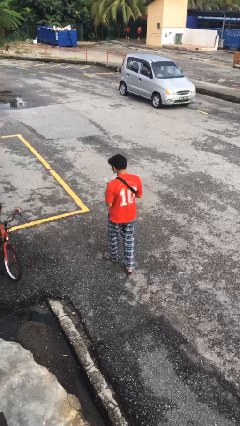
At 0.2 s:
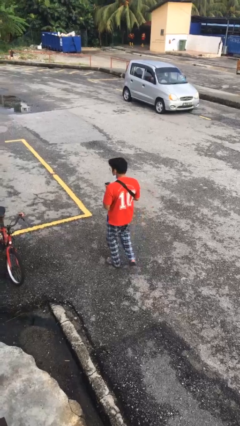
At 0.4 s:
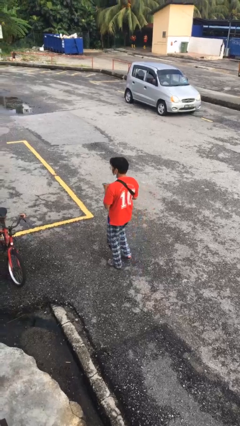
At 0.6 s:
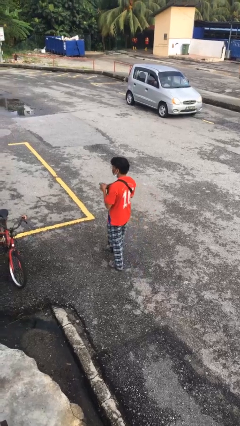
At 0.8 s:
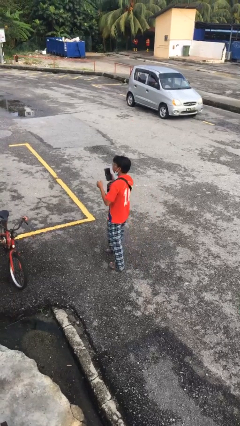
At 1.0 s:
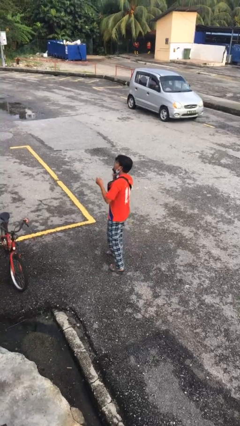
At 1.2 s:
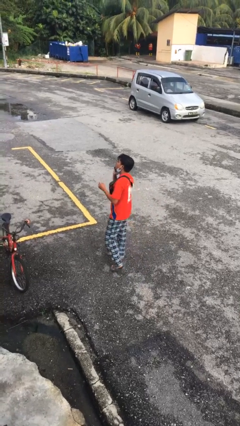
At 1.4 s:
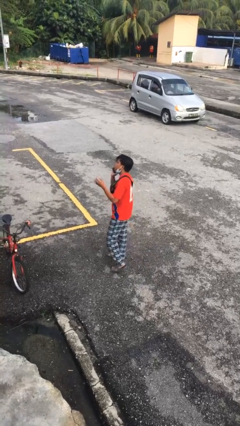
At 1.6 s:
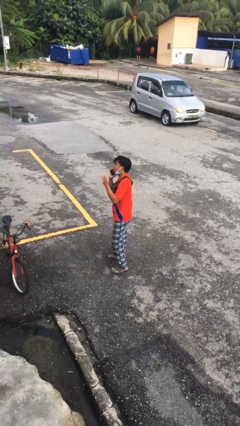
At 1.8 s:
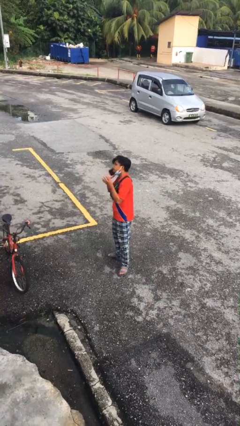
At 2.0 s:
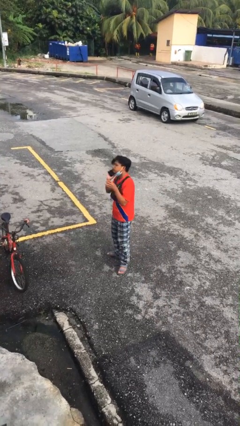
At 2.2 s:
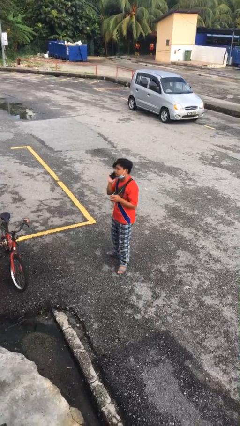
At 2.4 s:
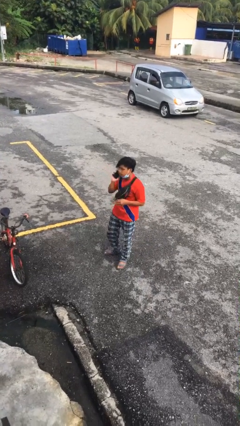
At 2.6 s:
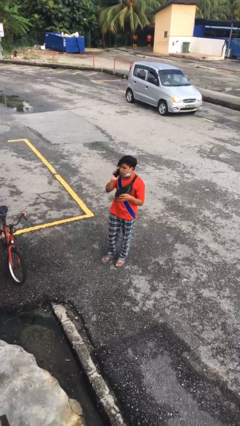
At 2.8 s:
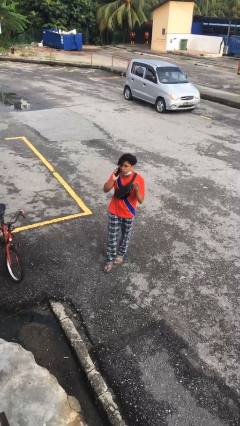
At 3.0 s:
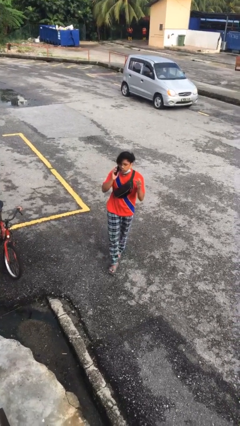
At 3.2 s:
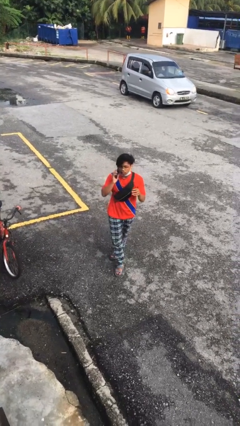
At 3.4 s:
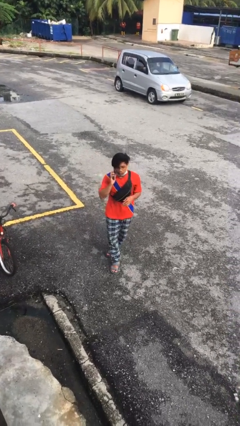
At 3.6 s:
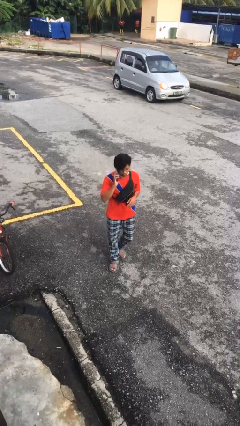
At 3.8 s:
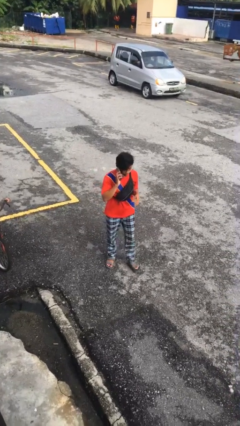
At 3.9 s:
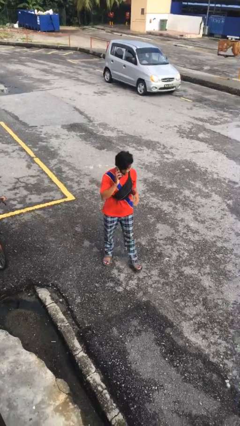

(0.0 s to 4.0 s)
person talks on phone

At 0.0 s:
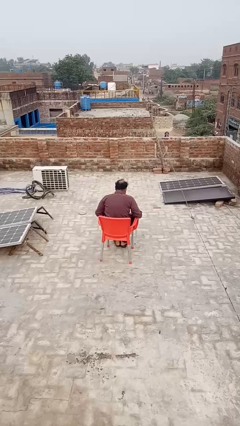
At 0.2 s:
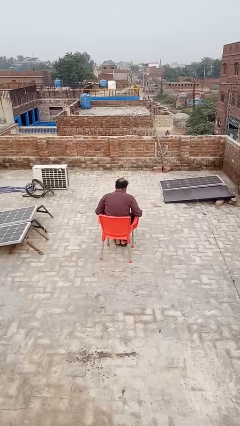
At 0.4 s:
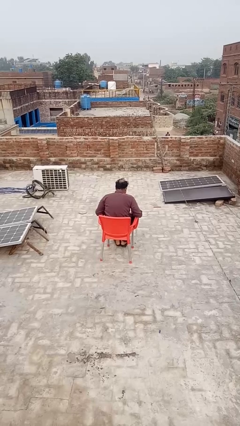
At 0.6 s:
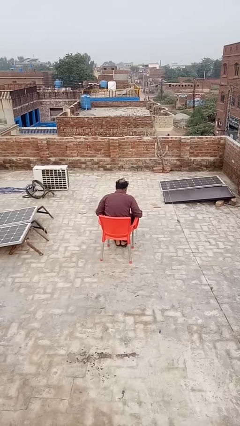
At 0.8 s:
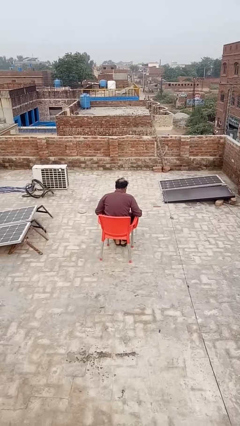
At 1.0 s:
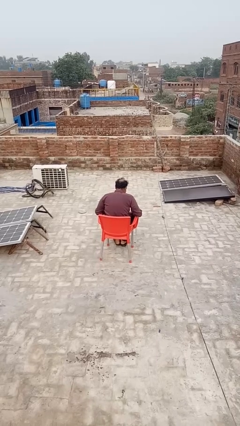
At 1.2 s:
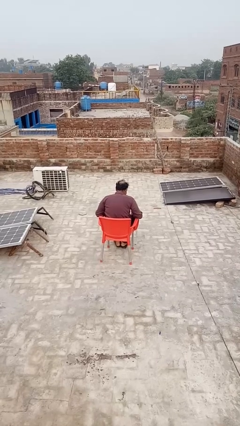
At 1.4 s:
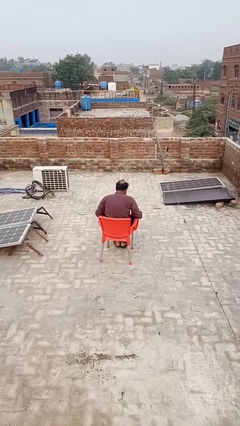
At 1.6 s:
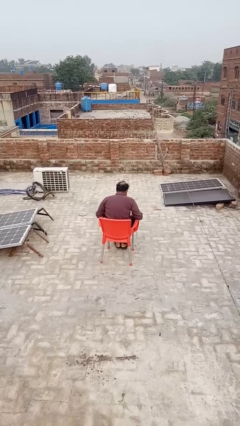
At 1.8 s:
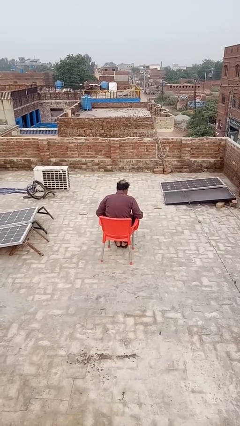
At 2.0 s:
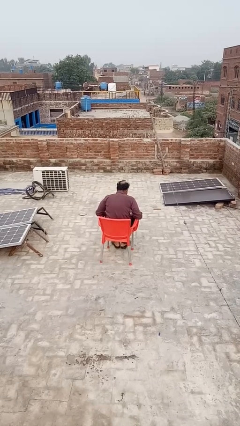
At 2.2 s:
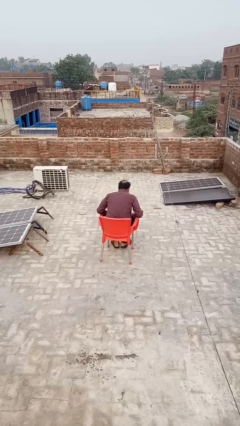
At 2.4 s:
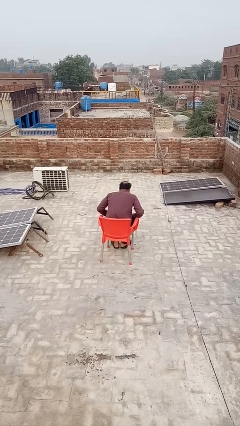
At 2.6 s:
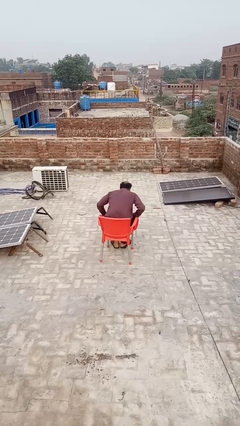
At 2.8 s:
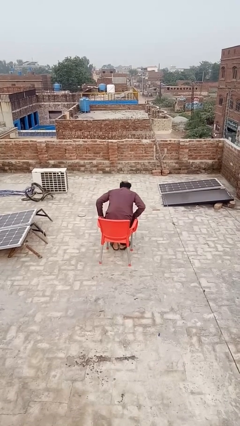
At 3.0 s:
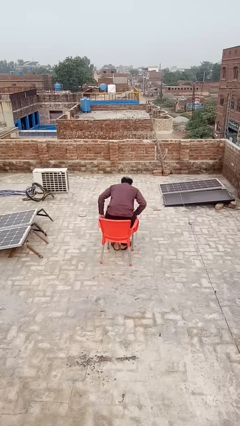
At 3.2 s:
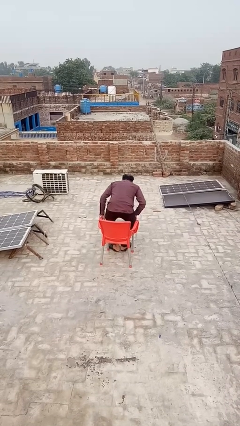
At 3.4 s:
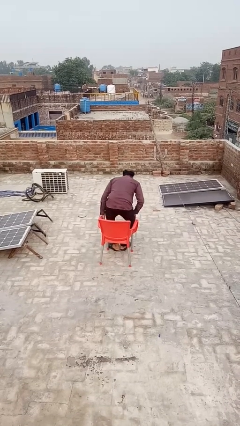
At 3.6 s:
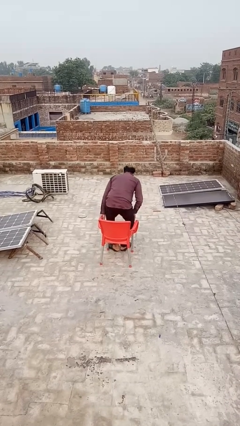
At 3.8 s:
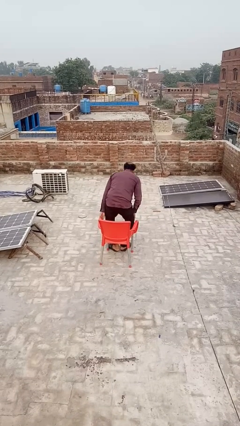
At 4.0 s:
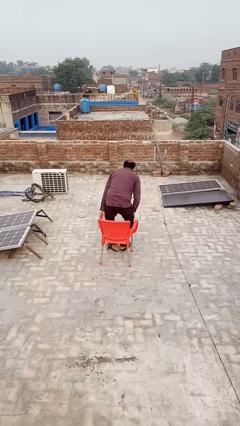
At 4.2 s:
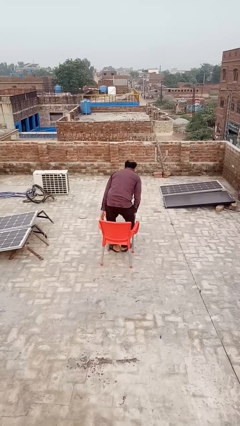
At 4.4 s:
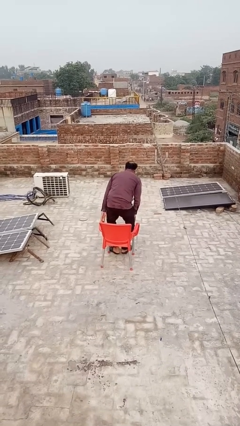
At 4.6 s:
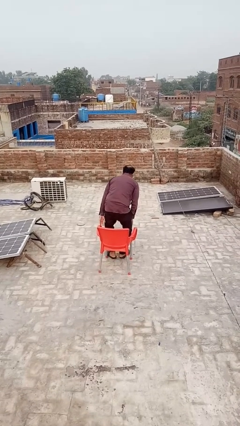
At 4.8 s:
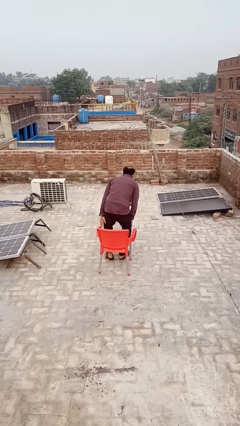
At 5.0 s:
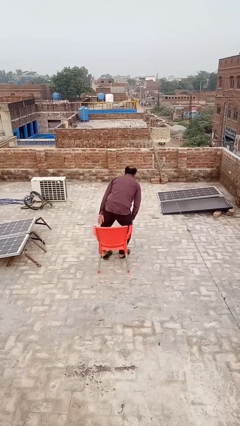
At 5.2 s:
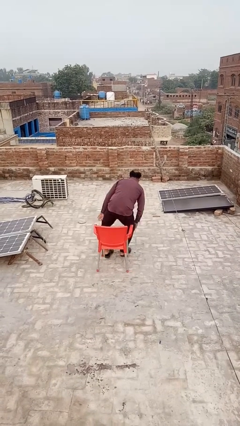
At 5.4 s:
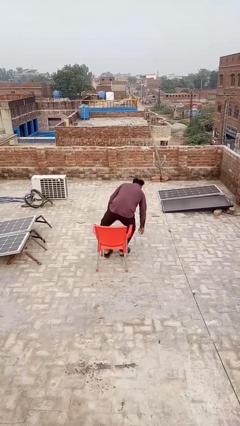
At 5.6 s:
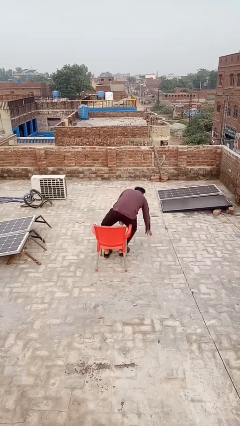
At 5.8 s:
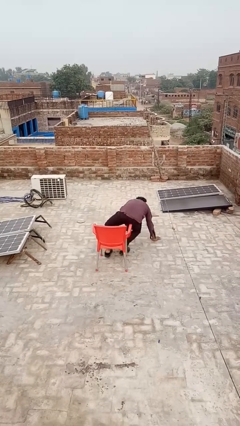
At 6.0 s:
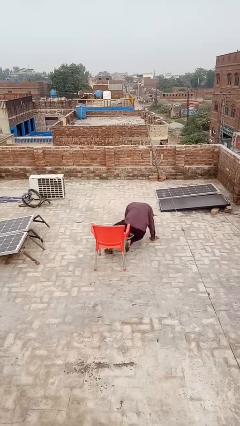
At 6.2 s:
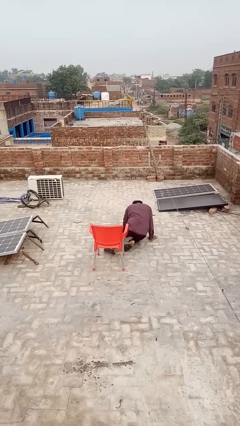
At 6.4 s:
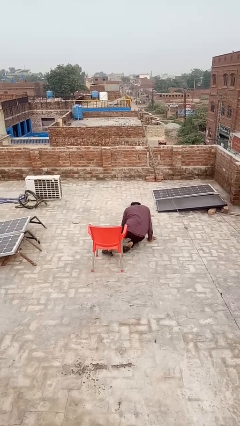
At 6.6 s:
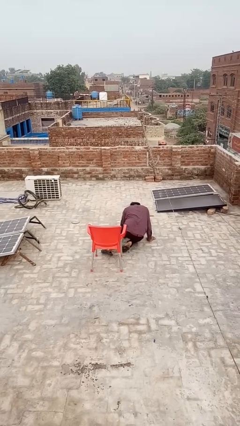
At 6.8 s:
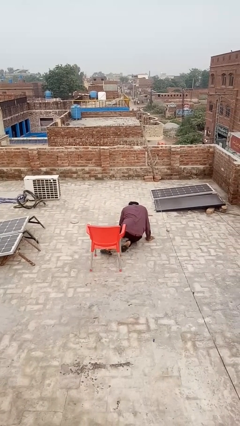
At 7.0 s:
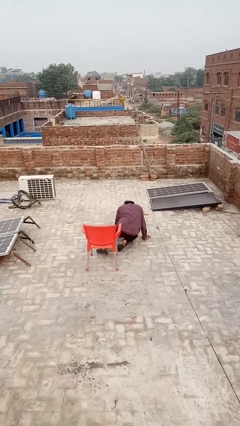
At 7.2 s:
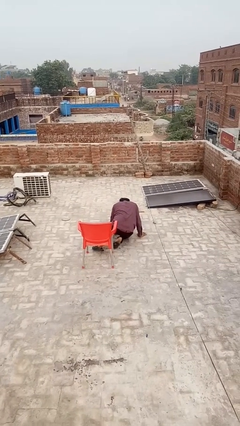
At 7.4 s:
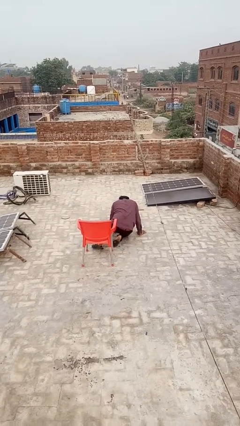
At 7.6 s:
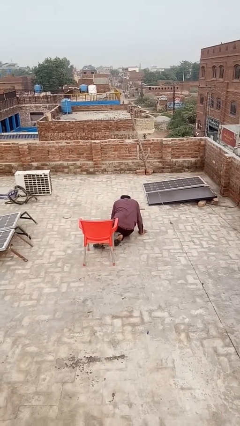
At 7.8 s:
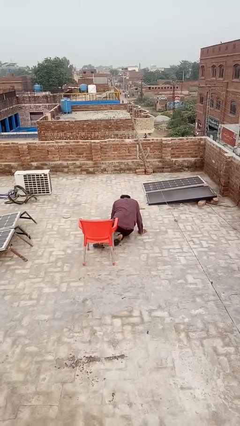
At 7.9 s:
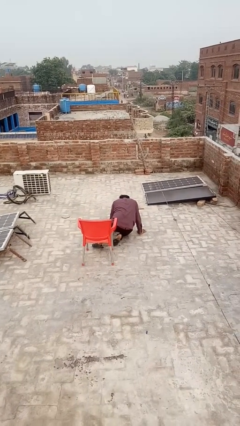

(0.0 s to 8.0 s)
person falls from chair

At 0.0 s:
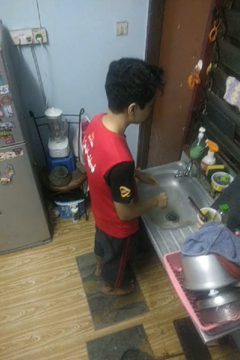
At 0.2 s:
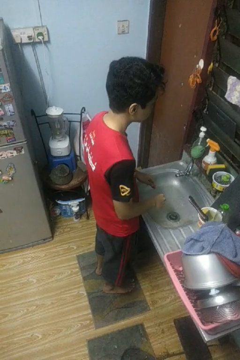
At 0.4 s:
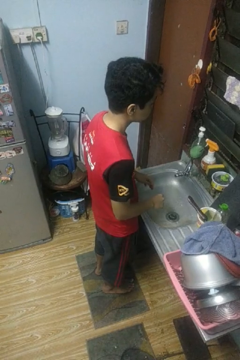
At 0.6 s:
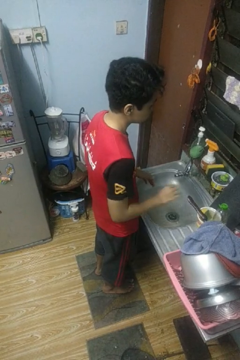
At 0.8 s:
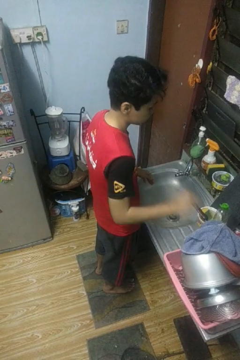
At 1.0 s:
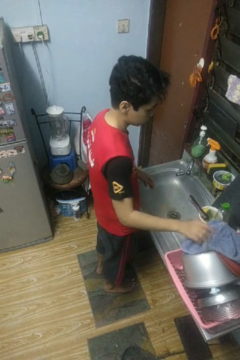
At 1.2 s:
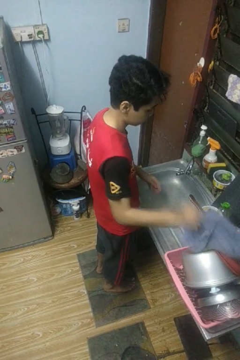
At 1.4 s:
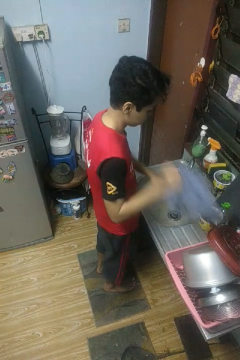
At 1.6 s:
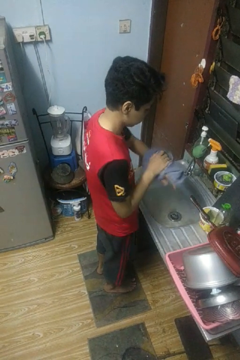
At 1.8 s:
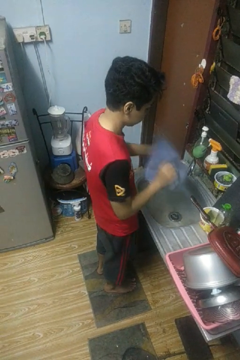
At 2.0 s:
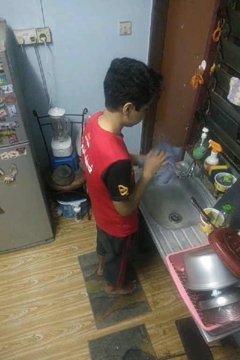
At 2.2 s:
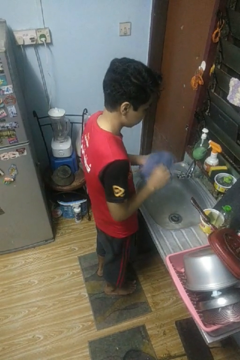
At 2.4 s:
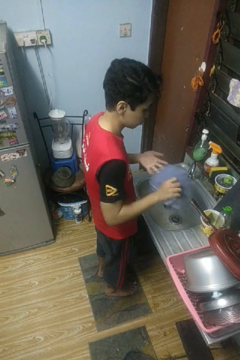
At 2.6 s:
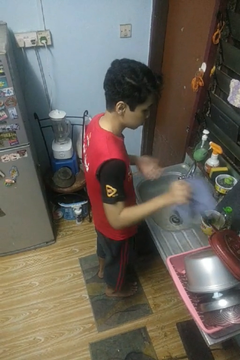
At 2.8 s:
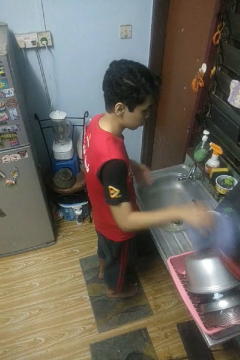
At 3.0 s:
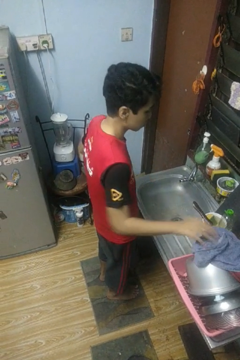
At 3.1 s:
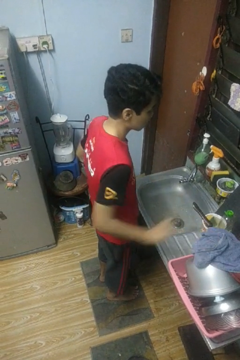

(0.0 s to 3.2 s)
person dries hands with towel

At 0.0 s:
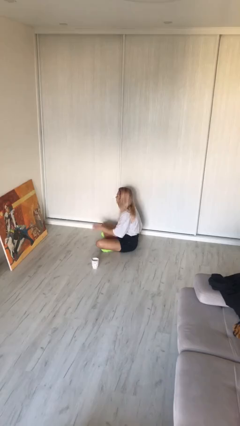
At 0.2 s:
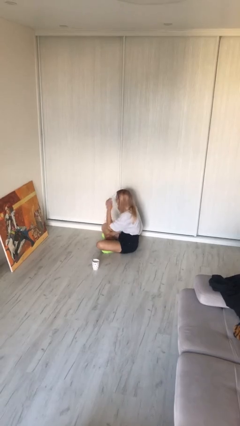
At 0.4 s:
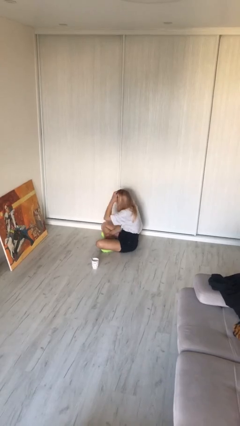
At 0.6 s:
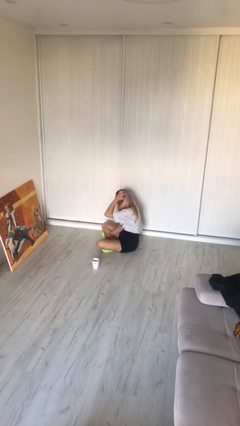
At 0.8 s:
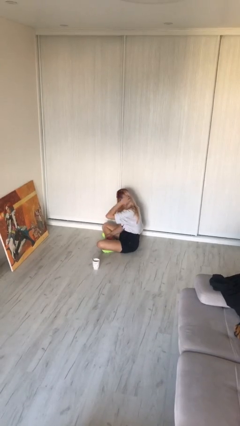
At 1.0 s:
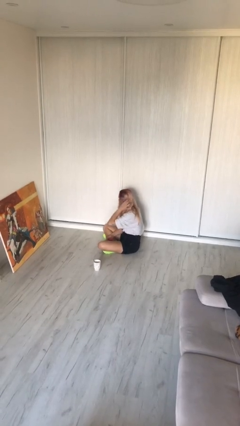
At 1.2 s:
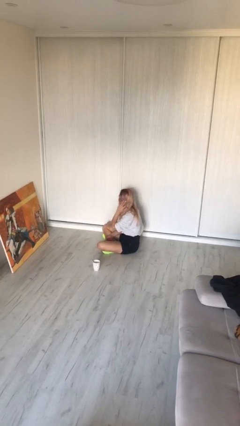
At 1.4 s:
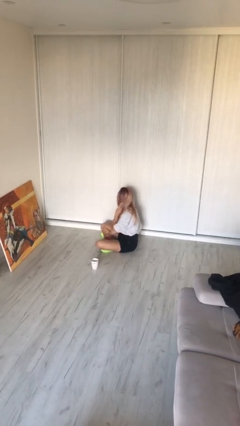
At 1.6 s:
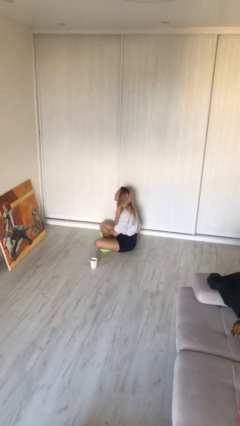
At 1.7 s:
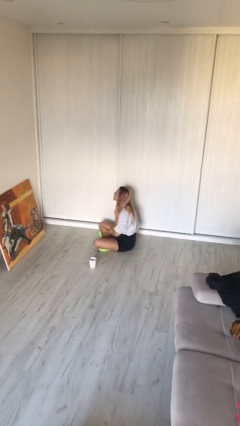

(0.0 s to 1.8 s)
person strokes hair

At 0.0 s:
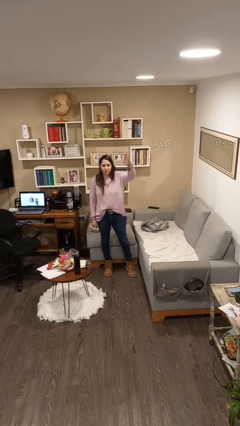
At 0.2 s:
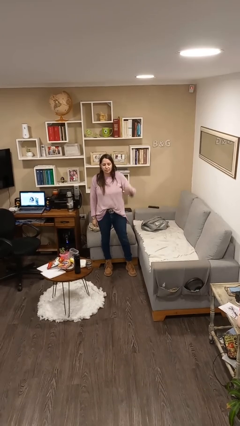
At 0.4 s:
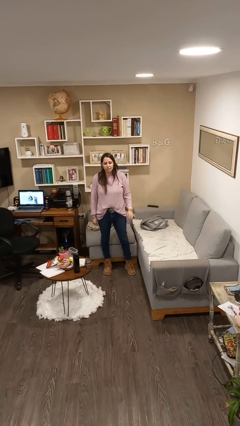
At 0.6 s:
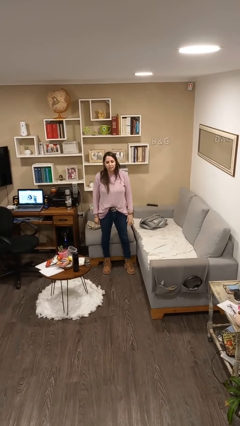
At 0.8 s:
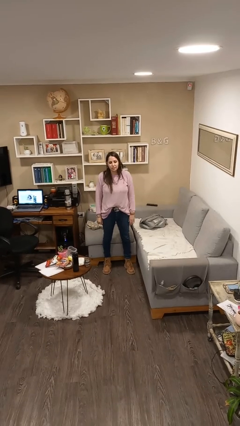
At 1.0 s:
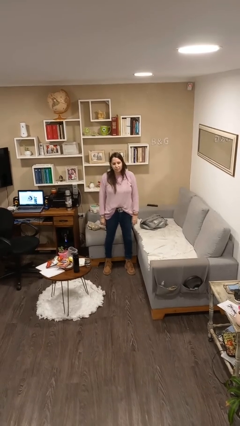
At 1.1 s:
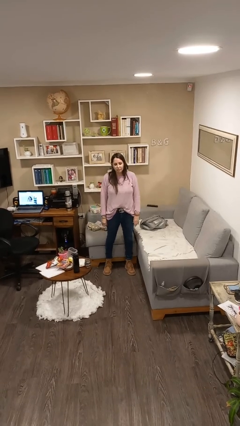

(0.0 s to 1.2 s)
person gestures lower hand

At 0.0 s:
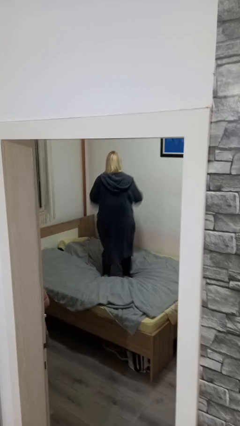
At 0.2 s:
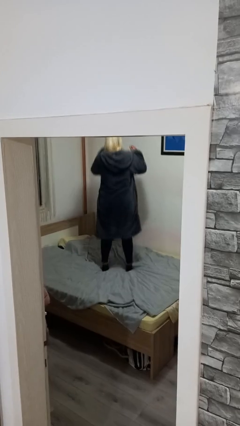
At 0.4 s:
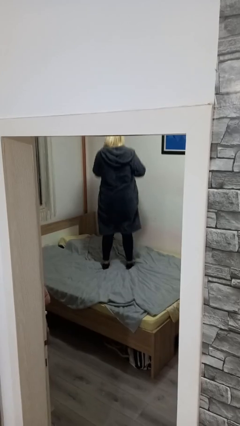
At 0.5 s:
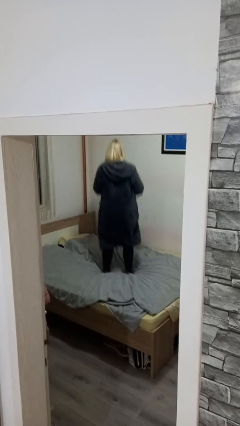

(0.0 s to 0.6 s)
person jumps on bed
